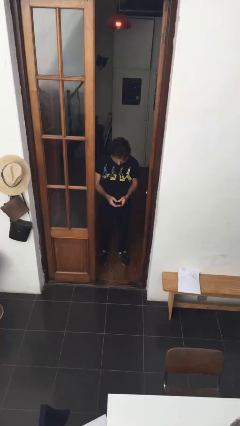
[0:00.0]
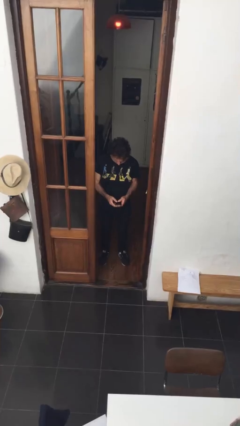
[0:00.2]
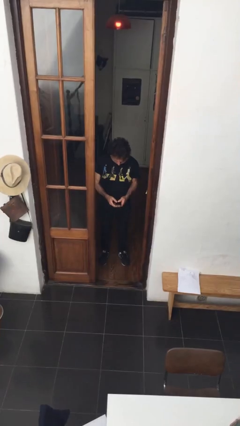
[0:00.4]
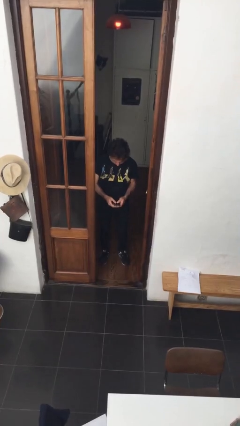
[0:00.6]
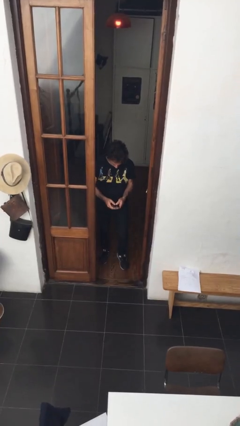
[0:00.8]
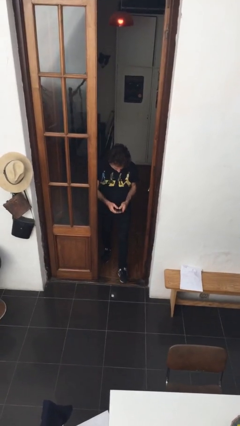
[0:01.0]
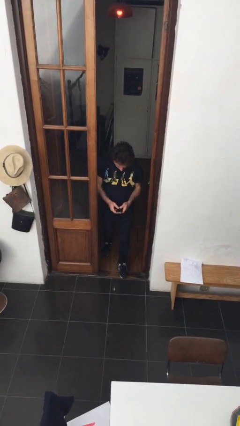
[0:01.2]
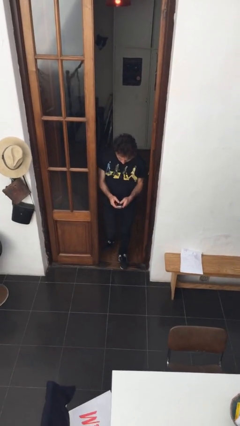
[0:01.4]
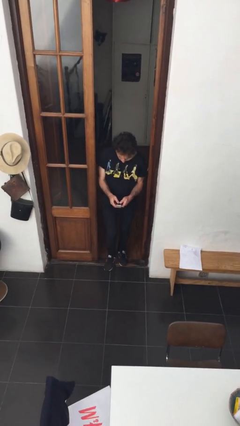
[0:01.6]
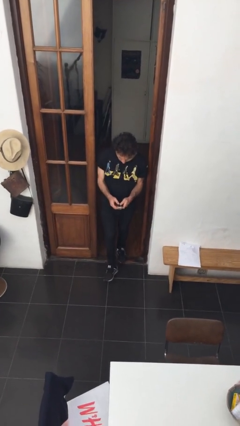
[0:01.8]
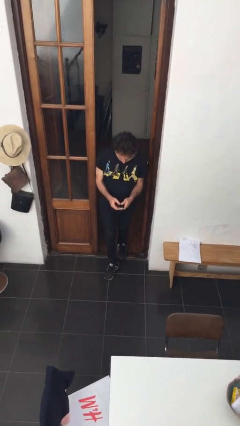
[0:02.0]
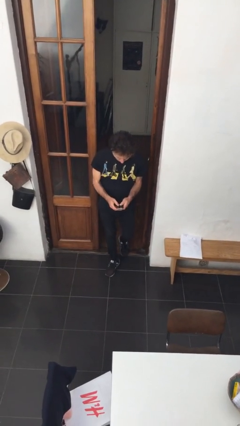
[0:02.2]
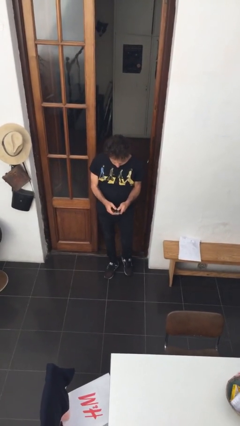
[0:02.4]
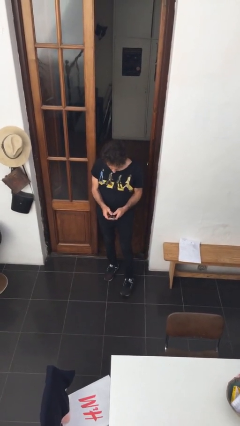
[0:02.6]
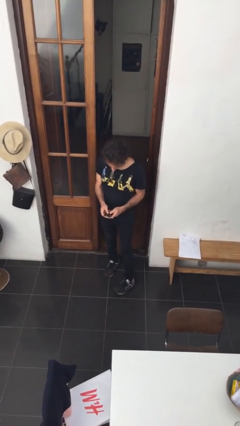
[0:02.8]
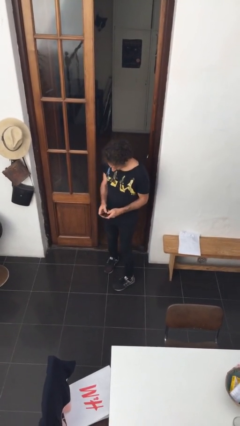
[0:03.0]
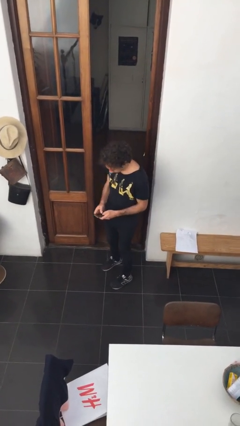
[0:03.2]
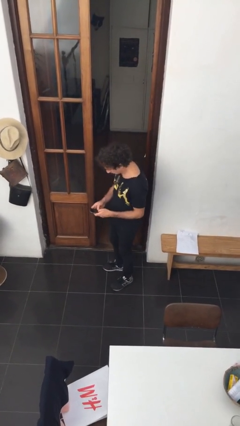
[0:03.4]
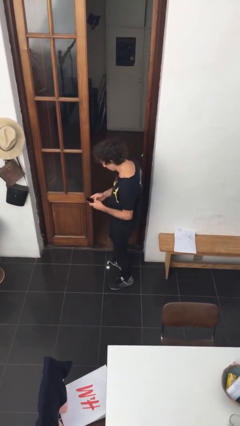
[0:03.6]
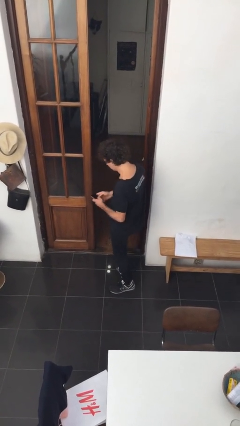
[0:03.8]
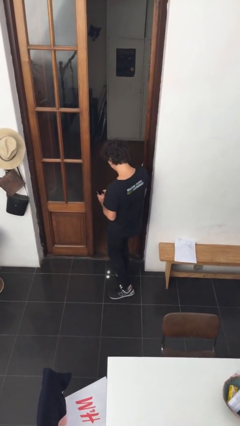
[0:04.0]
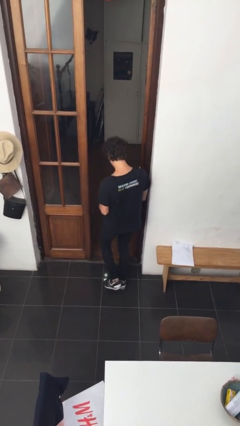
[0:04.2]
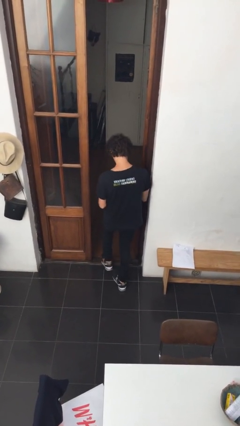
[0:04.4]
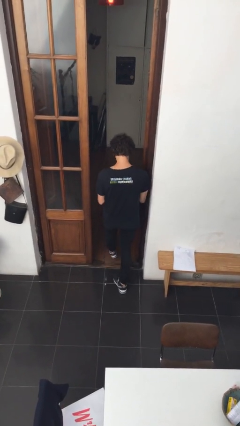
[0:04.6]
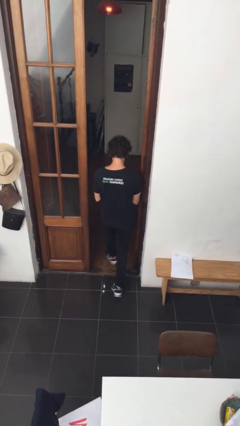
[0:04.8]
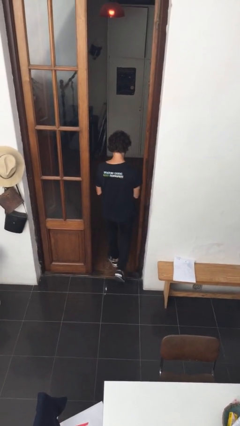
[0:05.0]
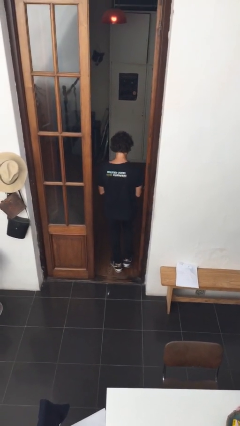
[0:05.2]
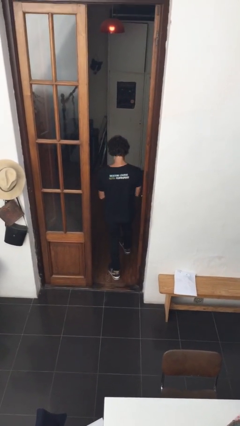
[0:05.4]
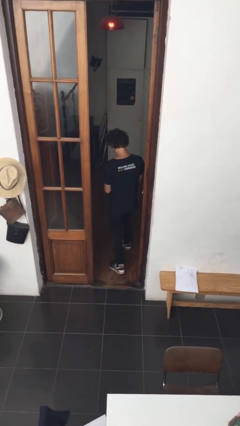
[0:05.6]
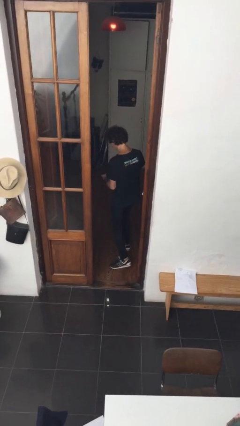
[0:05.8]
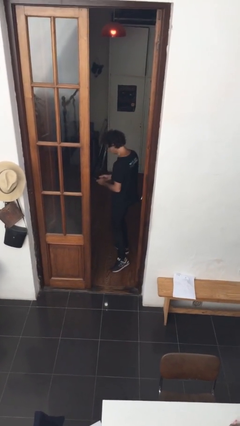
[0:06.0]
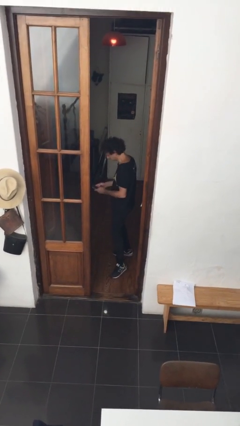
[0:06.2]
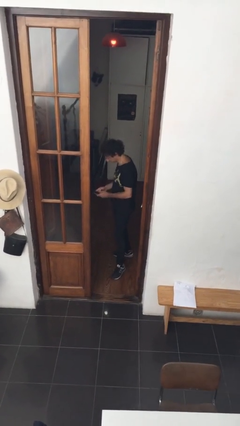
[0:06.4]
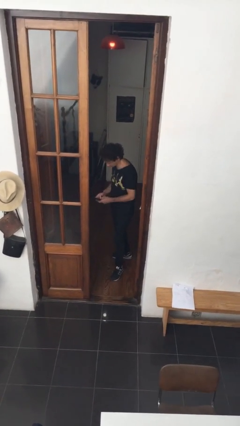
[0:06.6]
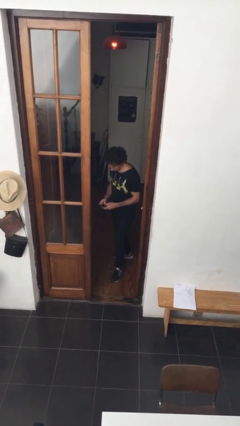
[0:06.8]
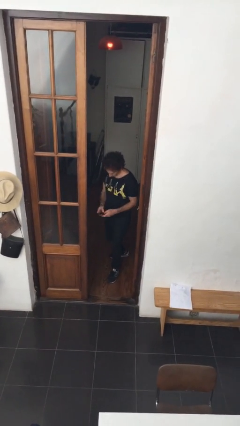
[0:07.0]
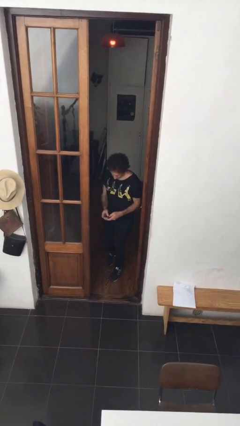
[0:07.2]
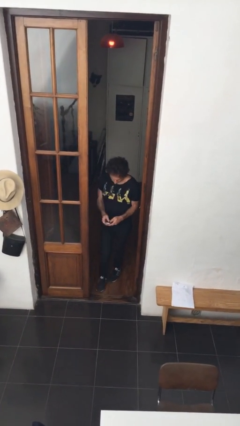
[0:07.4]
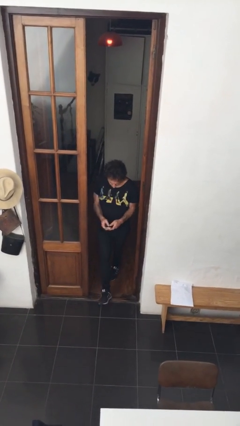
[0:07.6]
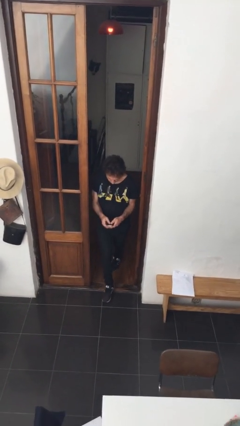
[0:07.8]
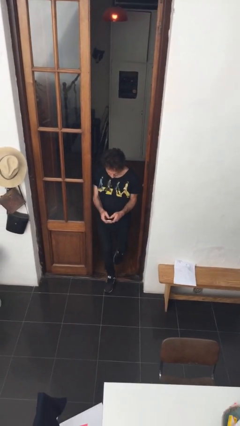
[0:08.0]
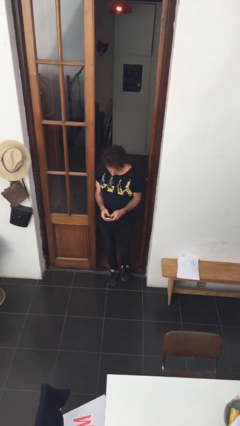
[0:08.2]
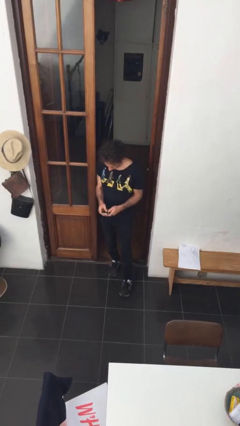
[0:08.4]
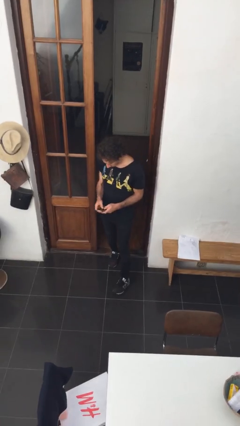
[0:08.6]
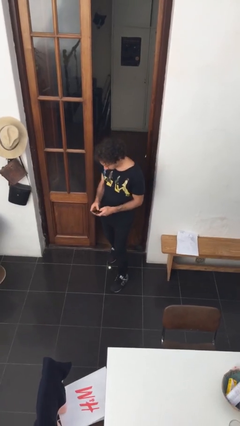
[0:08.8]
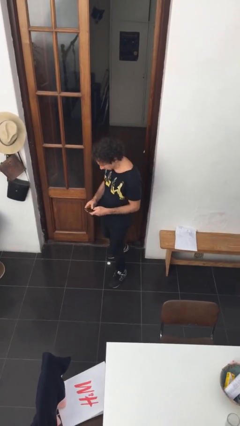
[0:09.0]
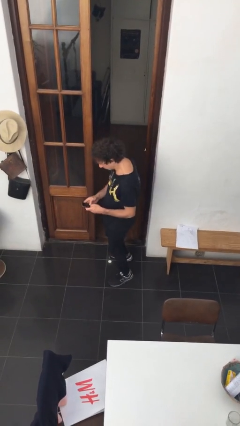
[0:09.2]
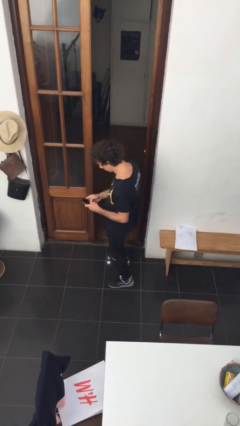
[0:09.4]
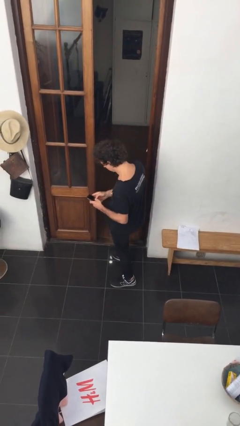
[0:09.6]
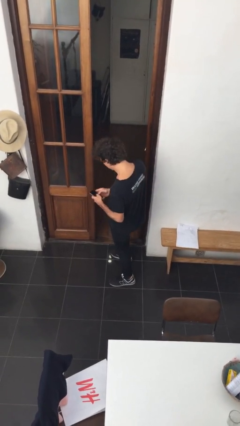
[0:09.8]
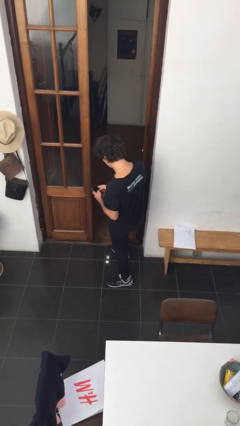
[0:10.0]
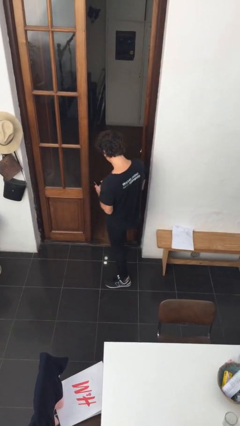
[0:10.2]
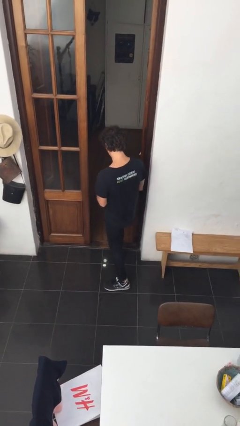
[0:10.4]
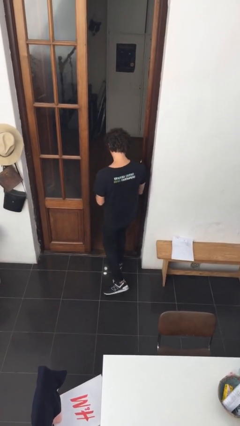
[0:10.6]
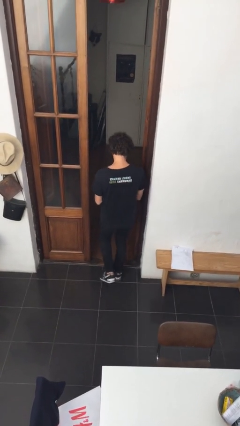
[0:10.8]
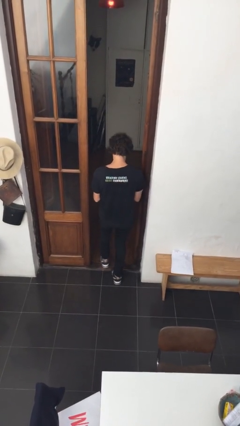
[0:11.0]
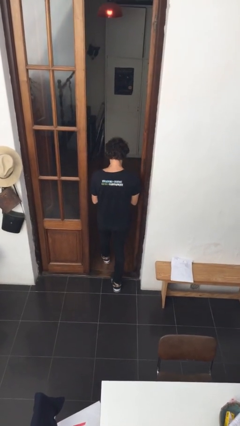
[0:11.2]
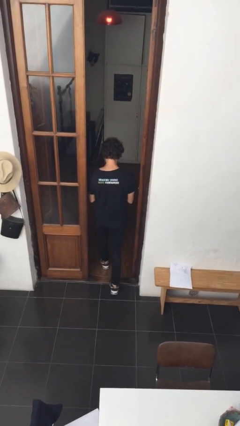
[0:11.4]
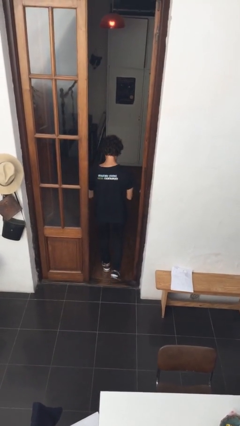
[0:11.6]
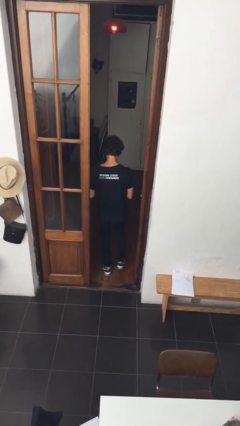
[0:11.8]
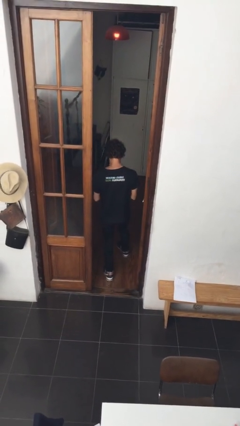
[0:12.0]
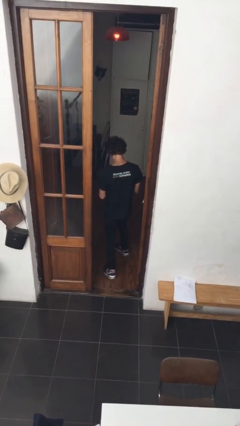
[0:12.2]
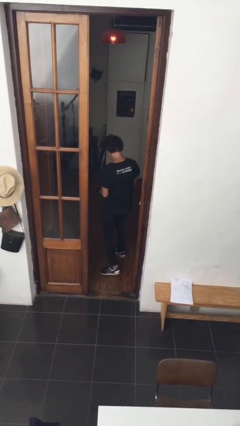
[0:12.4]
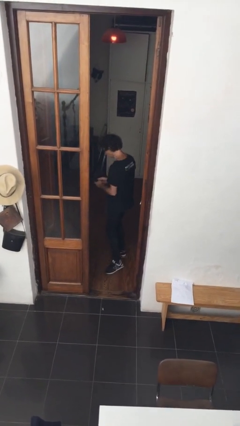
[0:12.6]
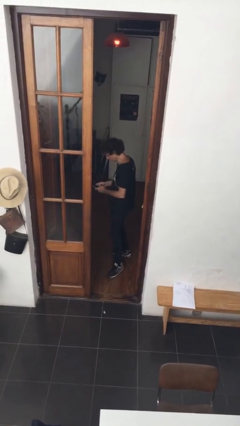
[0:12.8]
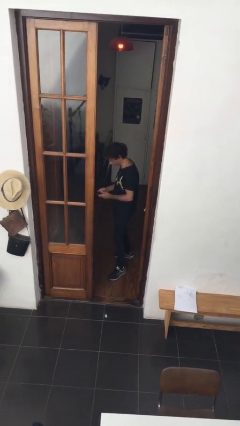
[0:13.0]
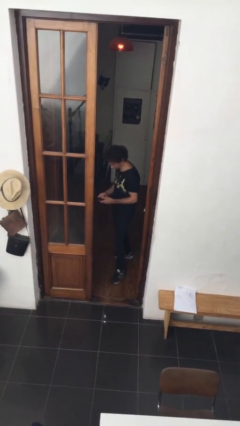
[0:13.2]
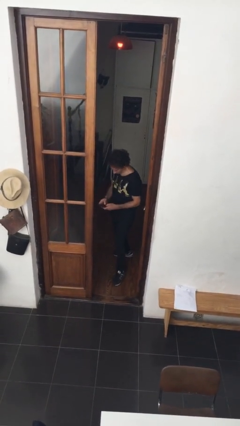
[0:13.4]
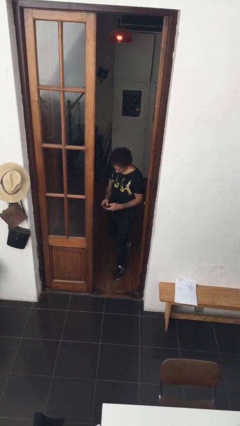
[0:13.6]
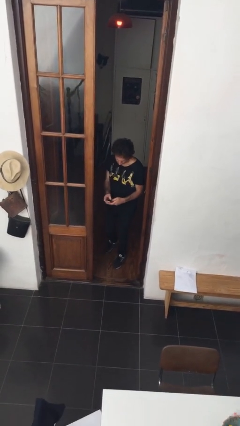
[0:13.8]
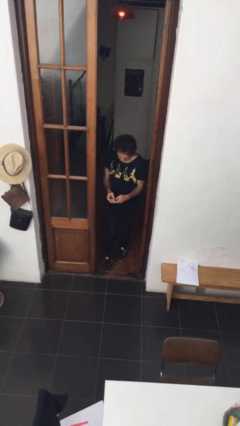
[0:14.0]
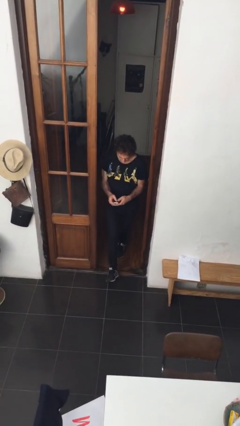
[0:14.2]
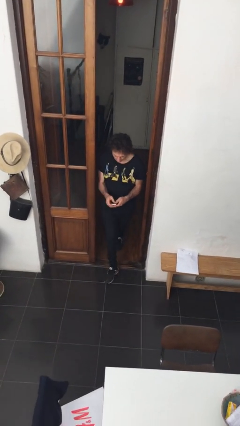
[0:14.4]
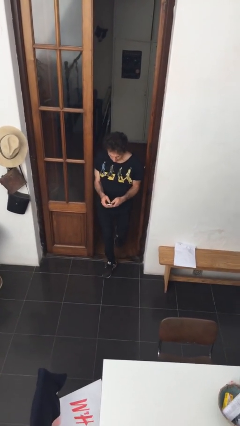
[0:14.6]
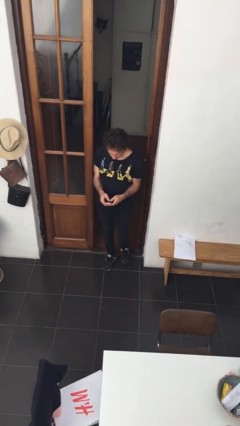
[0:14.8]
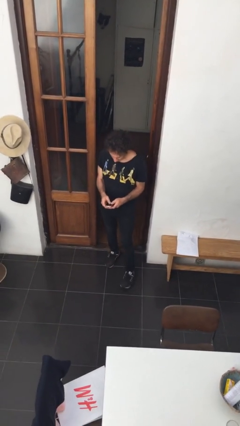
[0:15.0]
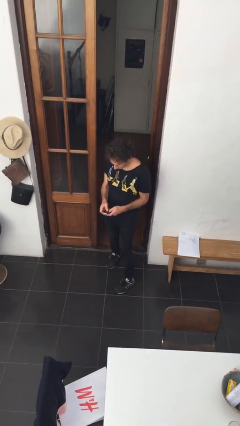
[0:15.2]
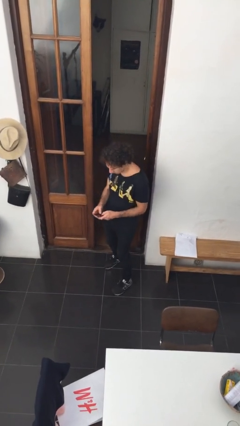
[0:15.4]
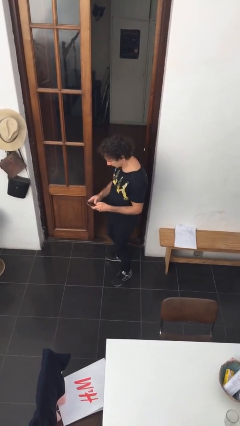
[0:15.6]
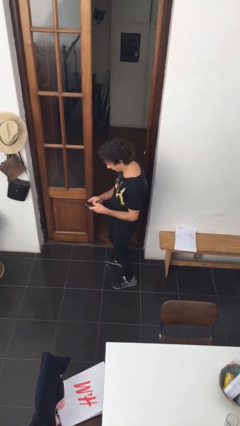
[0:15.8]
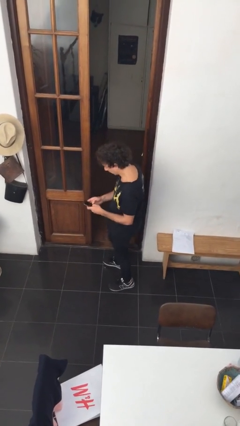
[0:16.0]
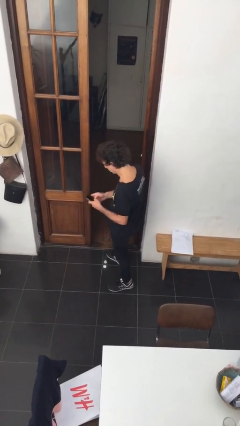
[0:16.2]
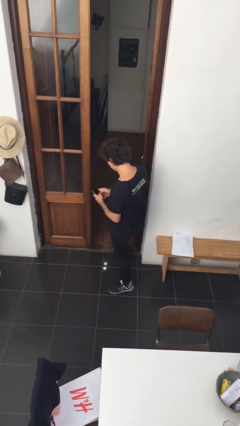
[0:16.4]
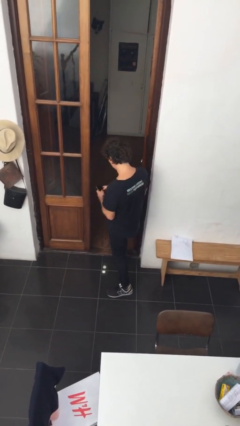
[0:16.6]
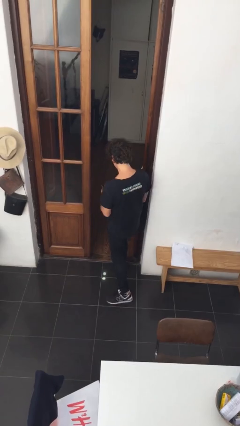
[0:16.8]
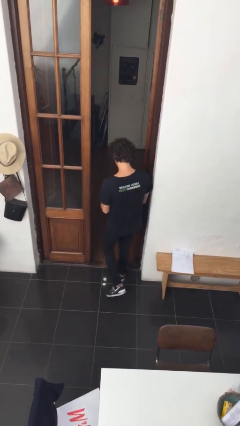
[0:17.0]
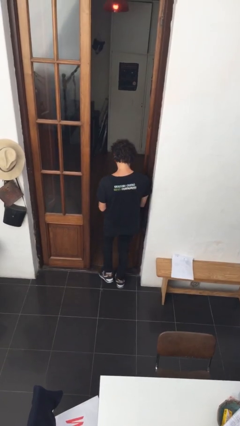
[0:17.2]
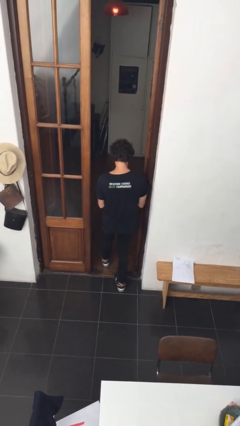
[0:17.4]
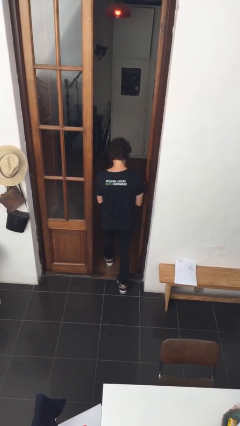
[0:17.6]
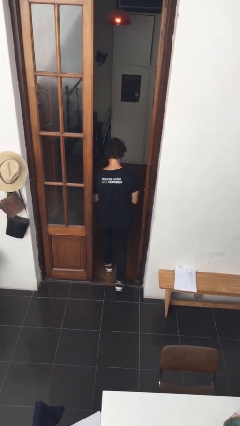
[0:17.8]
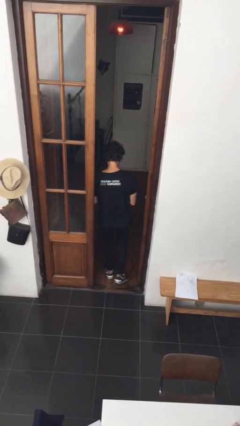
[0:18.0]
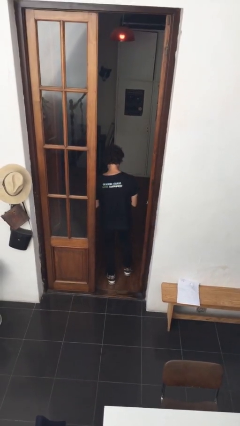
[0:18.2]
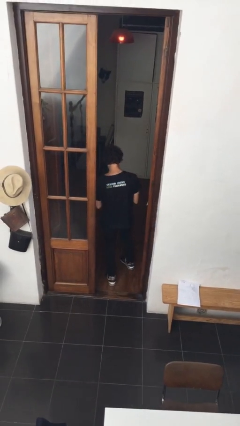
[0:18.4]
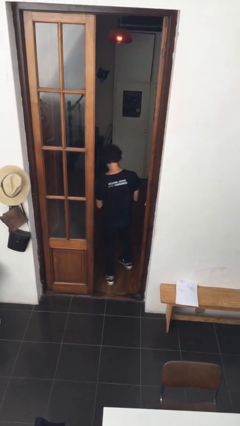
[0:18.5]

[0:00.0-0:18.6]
person texts on phone
